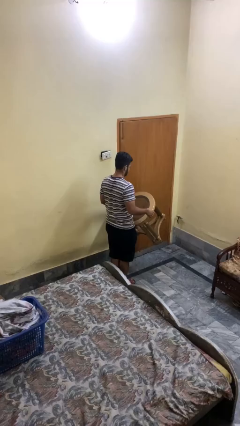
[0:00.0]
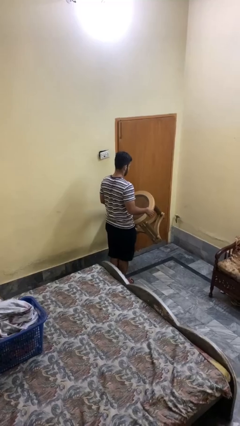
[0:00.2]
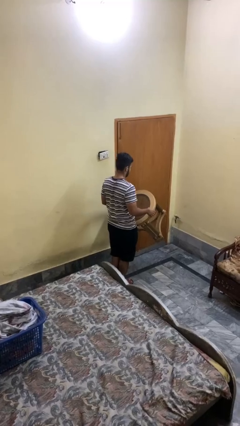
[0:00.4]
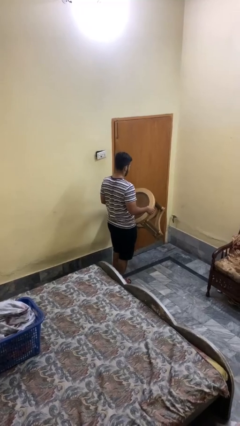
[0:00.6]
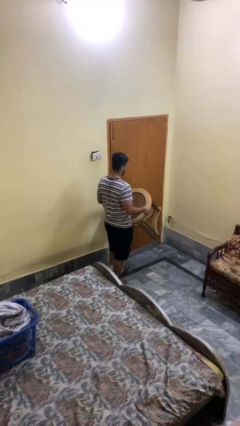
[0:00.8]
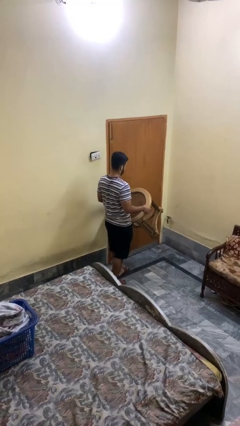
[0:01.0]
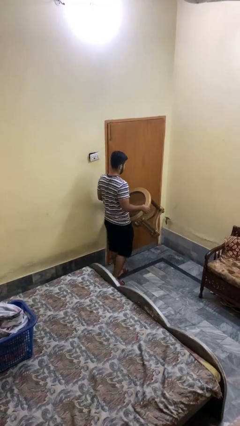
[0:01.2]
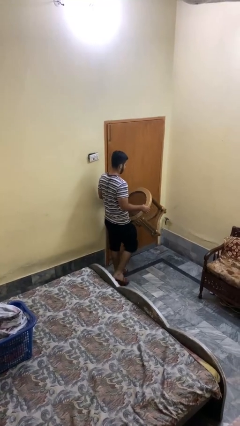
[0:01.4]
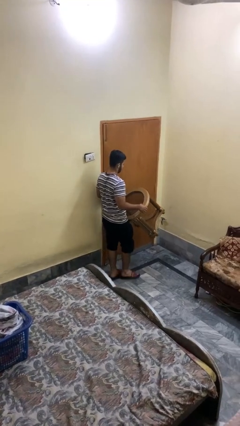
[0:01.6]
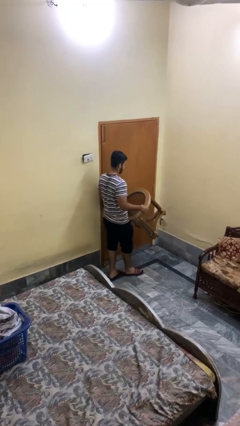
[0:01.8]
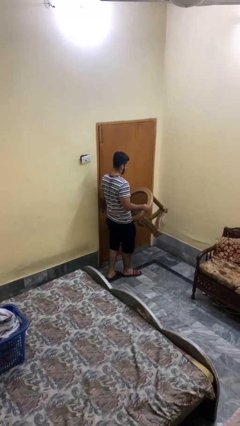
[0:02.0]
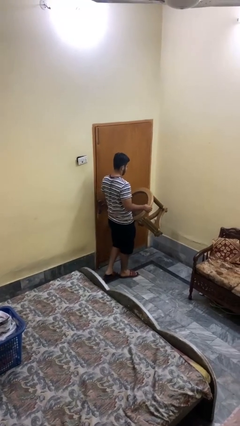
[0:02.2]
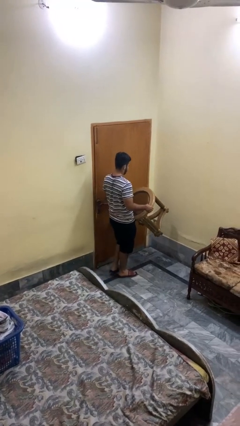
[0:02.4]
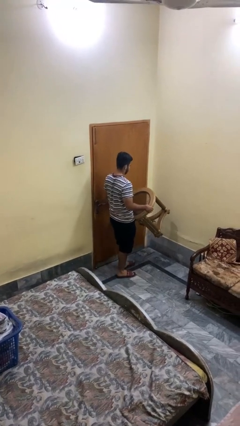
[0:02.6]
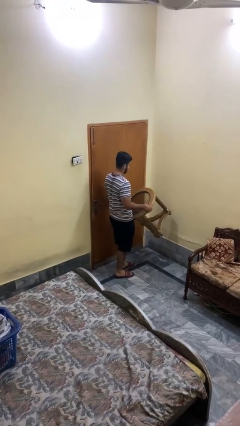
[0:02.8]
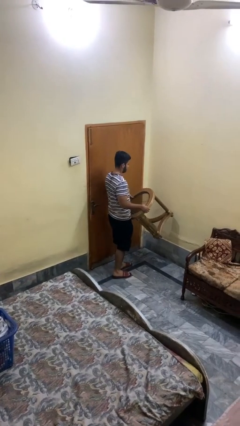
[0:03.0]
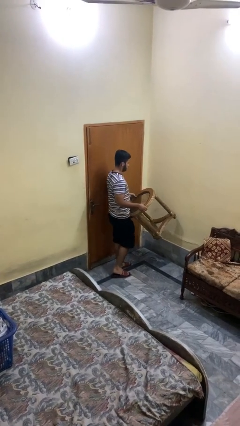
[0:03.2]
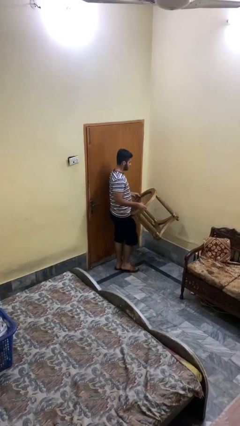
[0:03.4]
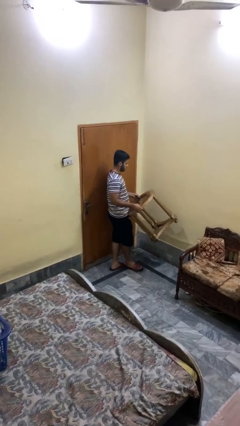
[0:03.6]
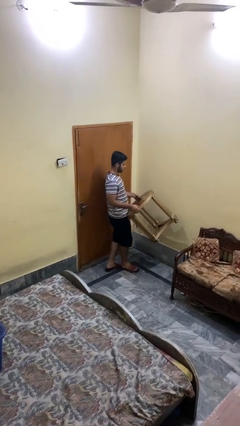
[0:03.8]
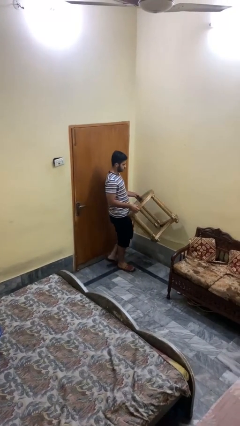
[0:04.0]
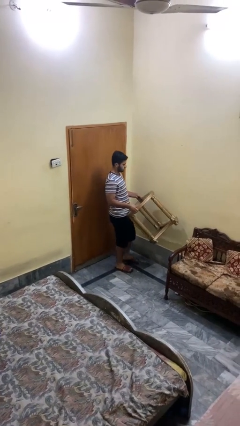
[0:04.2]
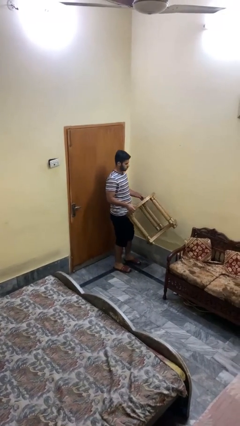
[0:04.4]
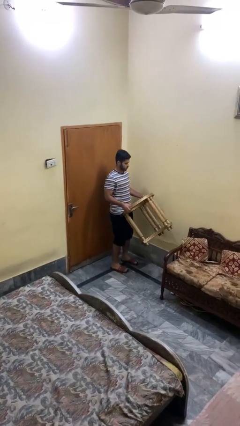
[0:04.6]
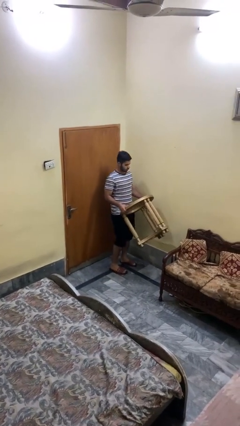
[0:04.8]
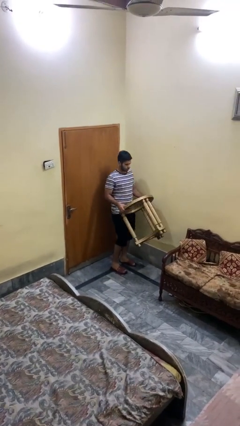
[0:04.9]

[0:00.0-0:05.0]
person carries furniture

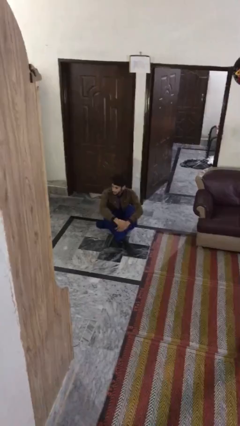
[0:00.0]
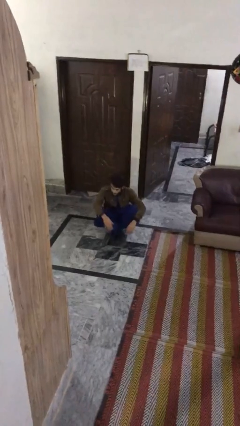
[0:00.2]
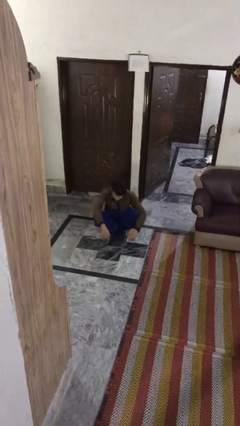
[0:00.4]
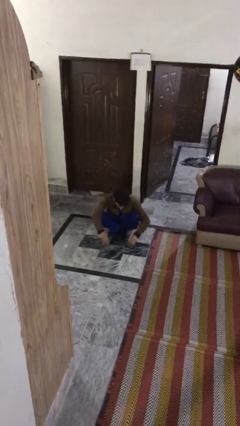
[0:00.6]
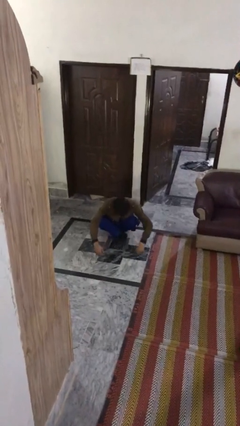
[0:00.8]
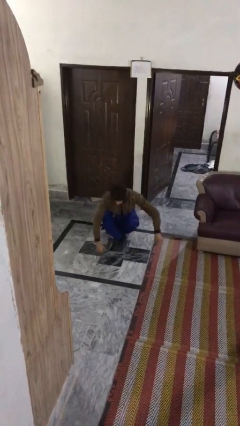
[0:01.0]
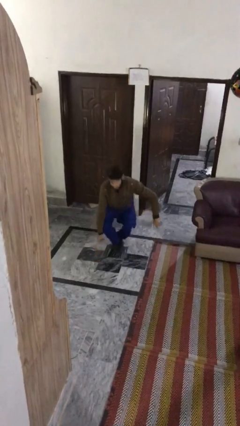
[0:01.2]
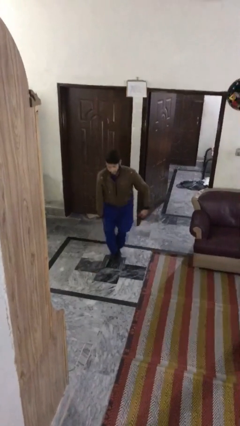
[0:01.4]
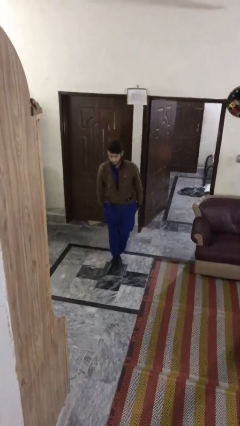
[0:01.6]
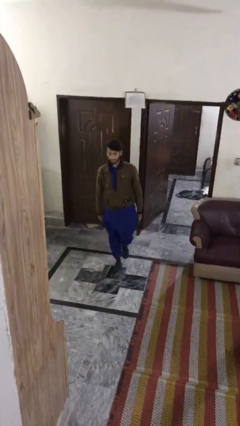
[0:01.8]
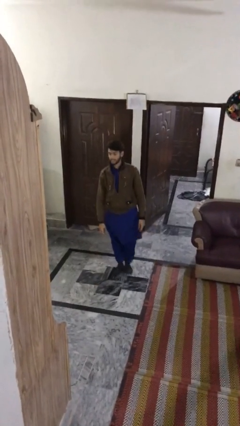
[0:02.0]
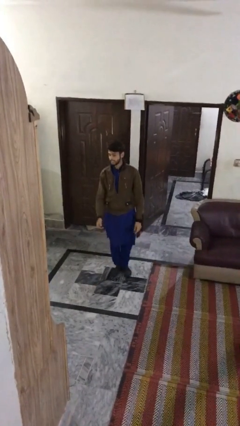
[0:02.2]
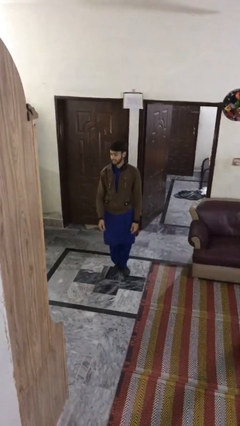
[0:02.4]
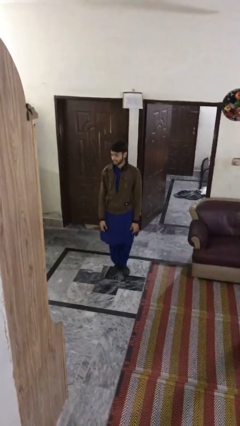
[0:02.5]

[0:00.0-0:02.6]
person stands up

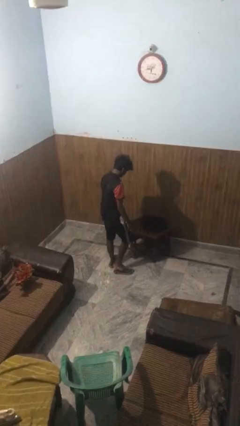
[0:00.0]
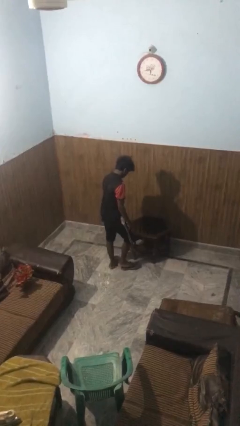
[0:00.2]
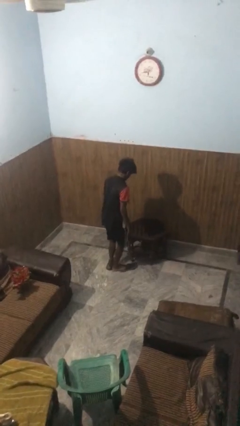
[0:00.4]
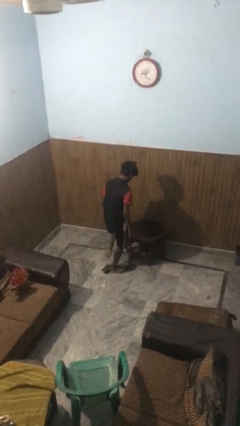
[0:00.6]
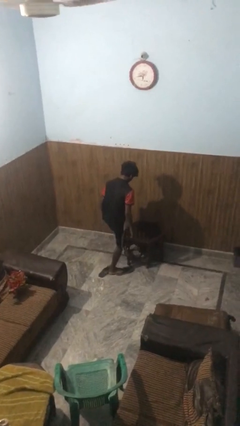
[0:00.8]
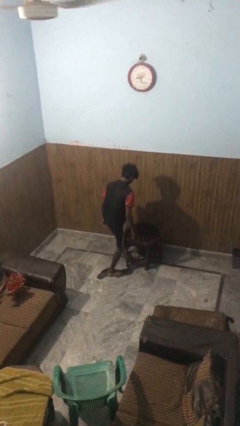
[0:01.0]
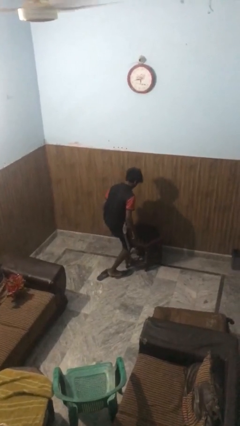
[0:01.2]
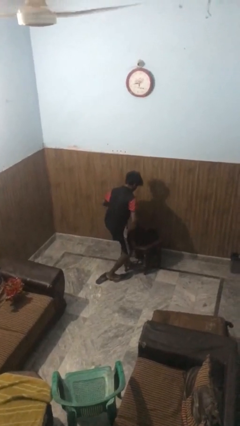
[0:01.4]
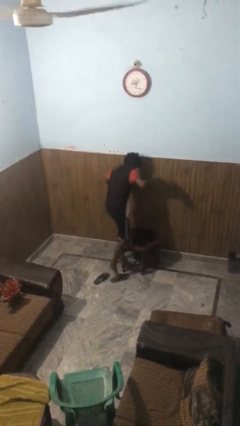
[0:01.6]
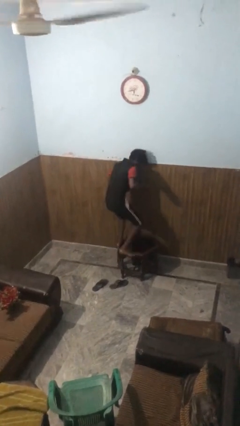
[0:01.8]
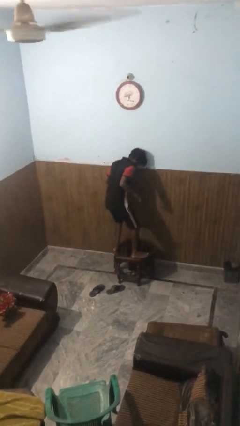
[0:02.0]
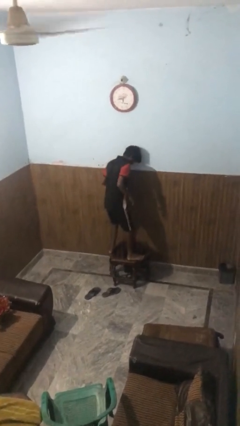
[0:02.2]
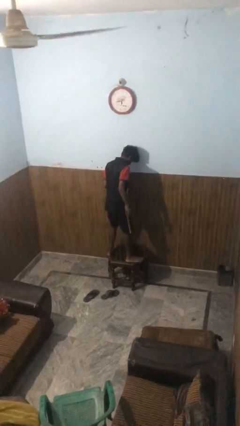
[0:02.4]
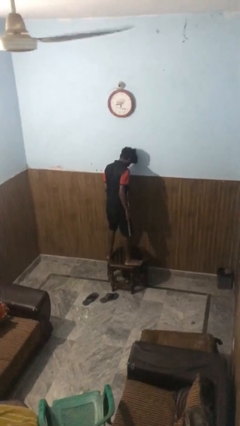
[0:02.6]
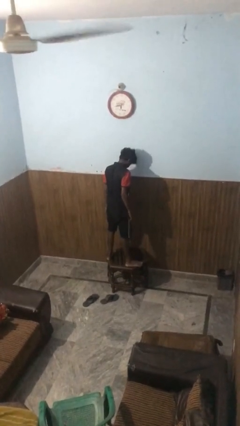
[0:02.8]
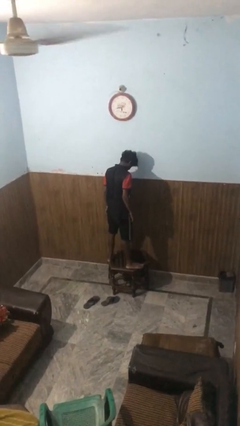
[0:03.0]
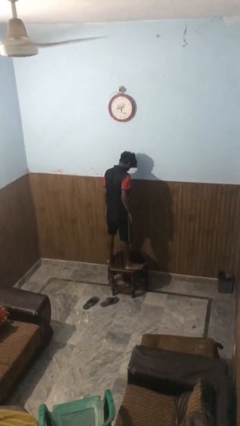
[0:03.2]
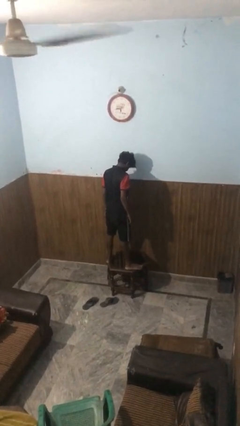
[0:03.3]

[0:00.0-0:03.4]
person climbs on table

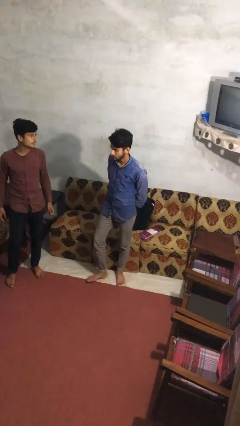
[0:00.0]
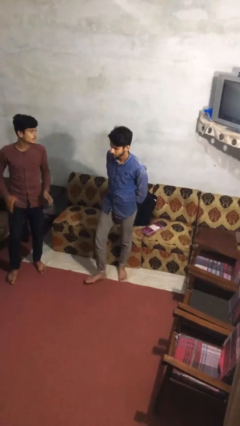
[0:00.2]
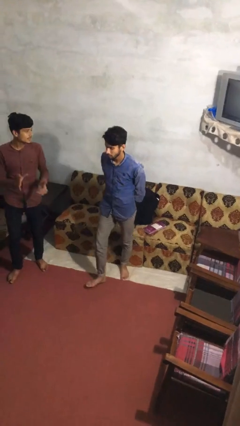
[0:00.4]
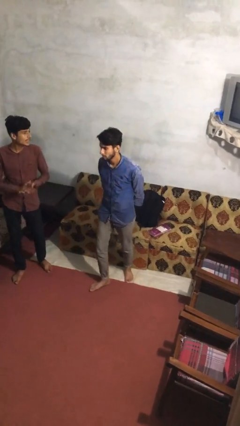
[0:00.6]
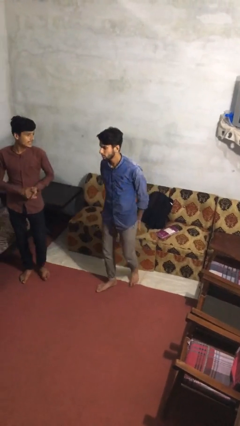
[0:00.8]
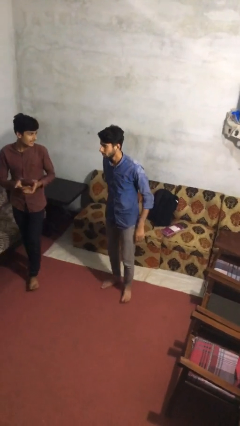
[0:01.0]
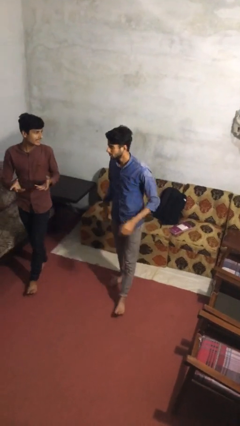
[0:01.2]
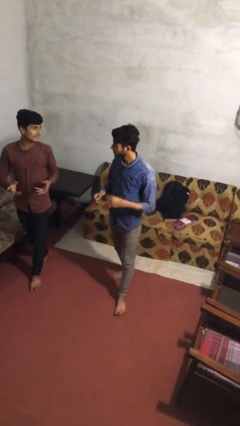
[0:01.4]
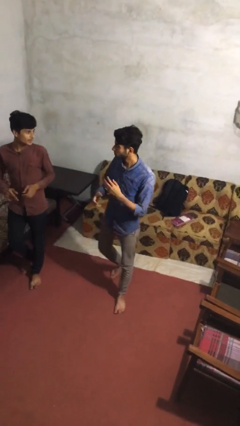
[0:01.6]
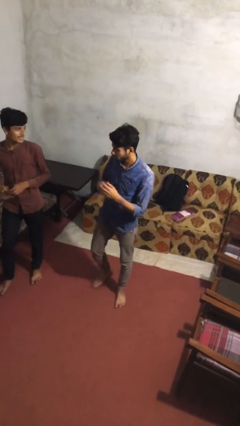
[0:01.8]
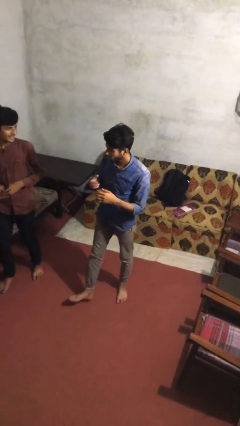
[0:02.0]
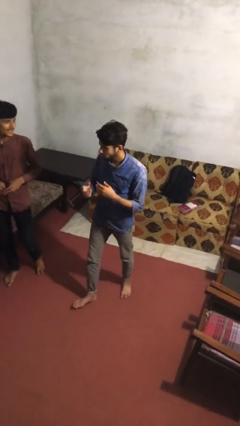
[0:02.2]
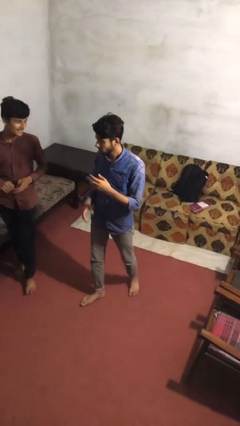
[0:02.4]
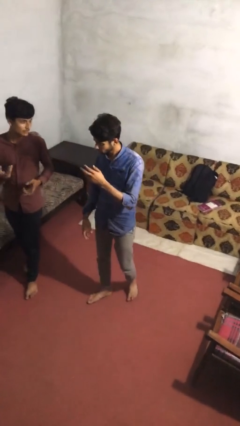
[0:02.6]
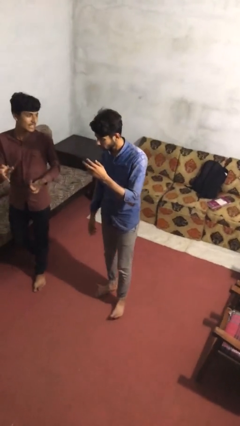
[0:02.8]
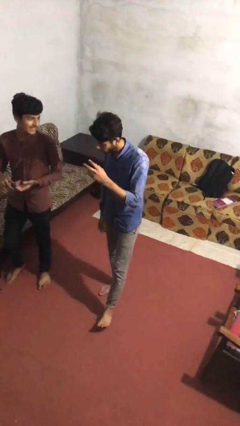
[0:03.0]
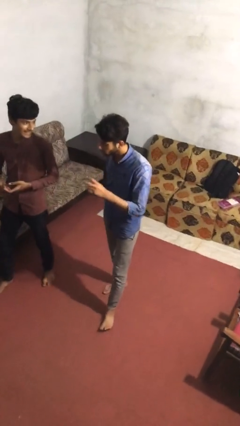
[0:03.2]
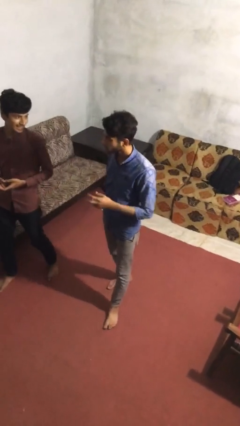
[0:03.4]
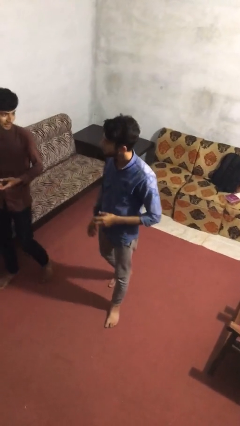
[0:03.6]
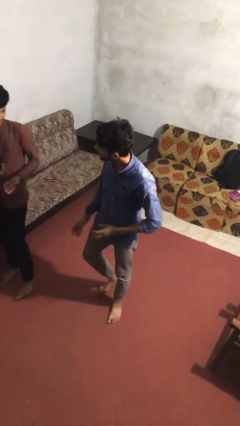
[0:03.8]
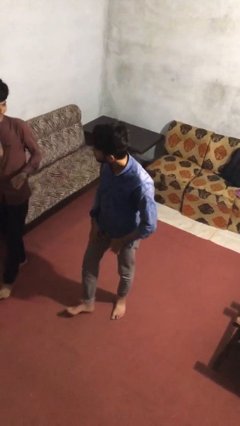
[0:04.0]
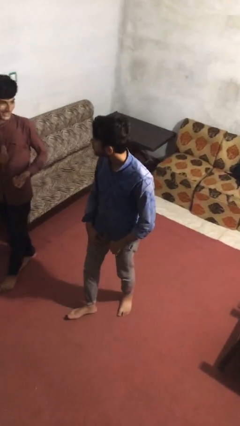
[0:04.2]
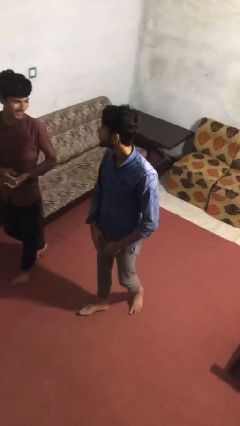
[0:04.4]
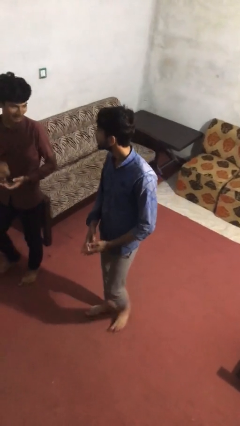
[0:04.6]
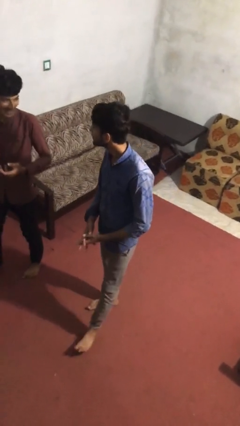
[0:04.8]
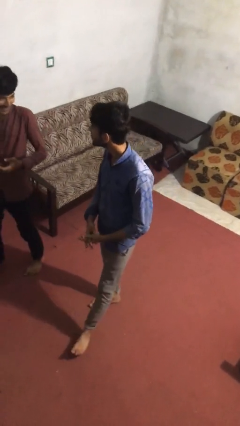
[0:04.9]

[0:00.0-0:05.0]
person talks to person

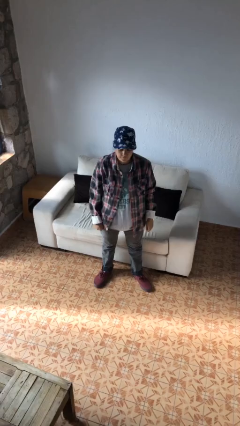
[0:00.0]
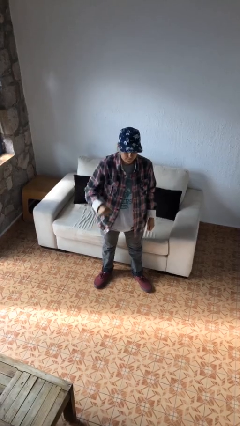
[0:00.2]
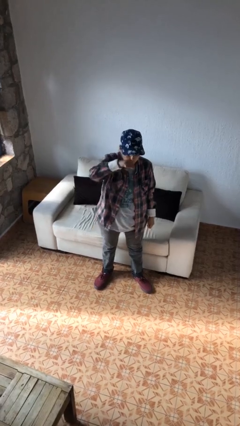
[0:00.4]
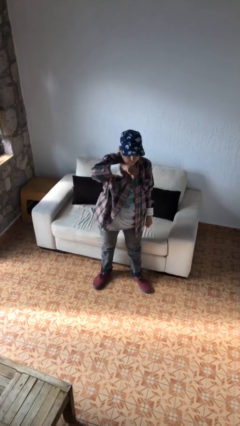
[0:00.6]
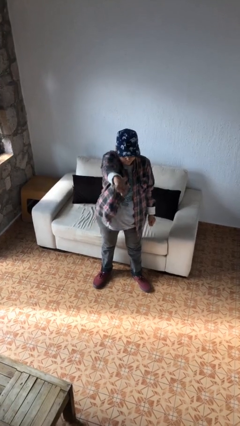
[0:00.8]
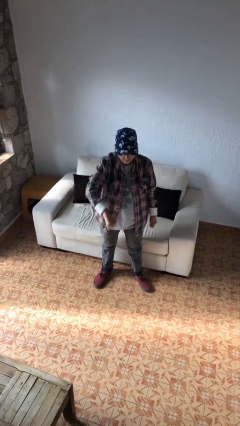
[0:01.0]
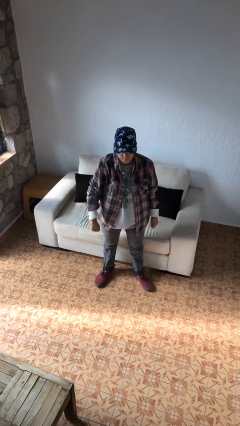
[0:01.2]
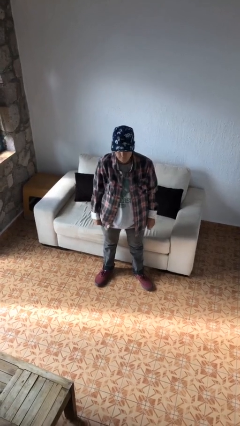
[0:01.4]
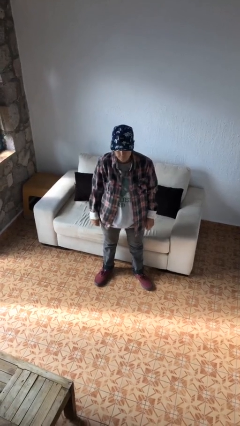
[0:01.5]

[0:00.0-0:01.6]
person punches

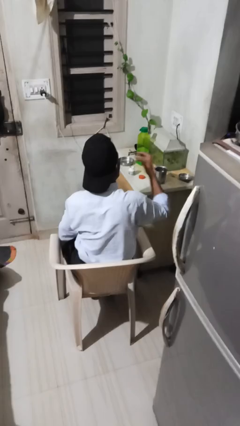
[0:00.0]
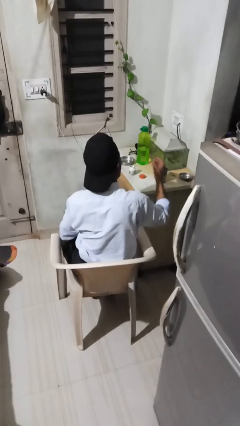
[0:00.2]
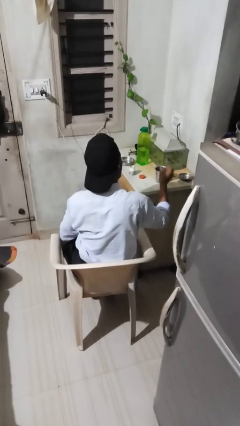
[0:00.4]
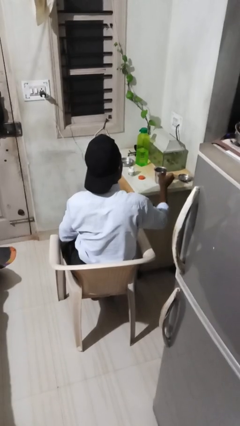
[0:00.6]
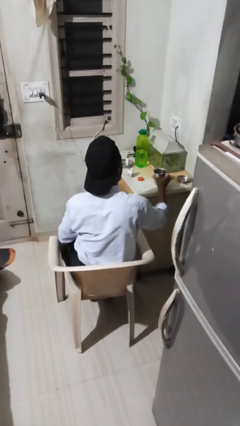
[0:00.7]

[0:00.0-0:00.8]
person takes medicine pills
